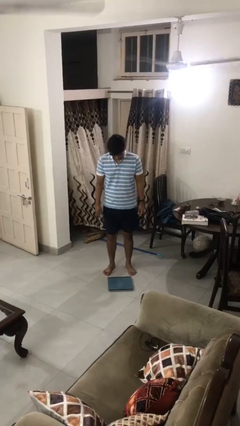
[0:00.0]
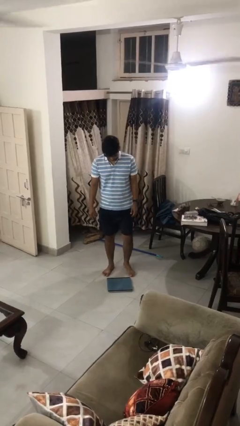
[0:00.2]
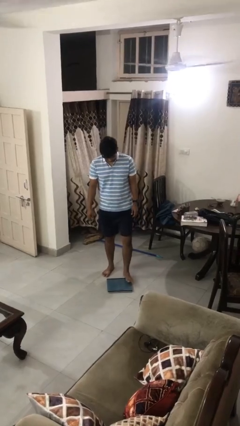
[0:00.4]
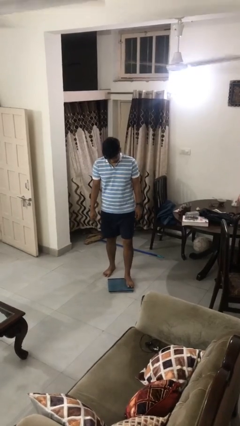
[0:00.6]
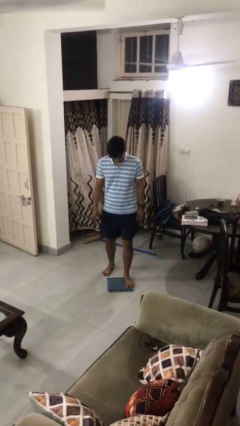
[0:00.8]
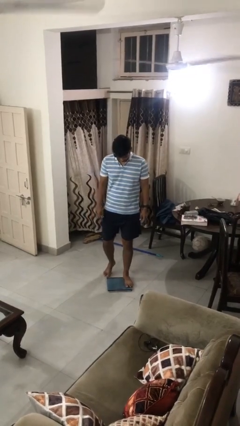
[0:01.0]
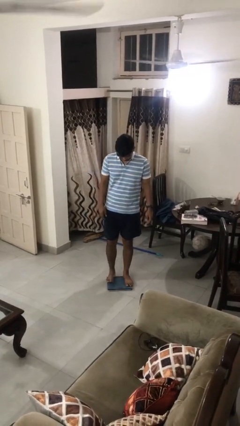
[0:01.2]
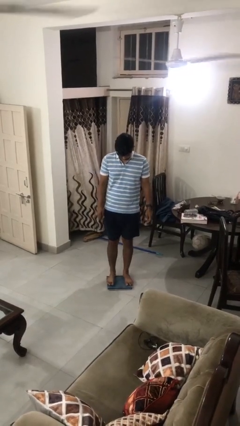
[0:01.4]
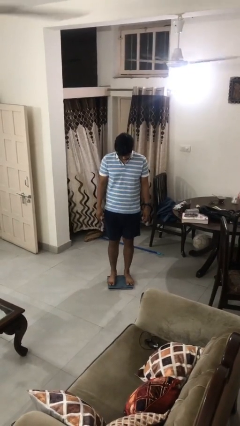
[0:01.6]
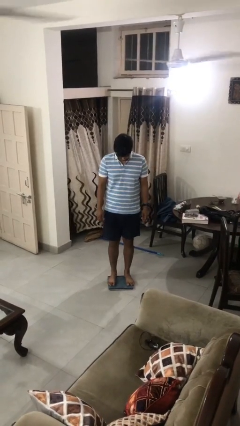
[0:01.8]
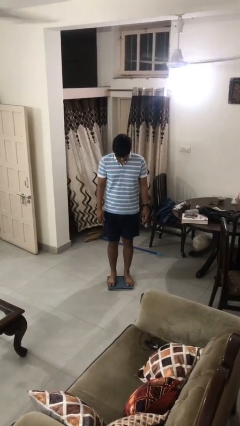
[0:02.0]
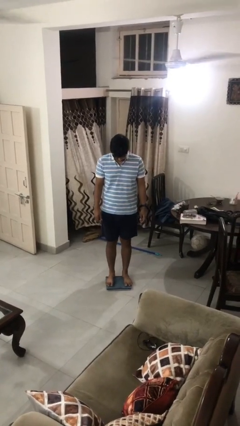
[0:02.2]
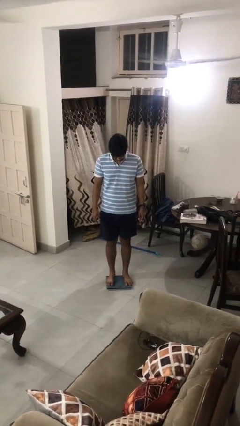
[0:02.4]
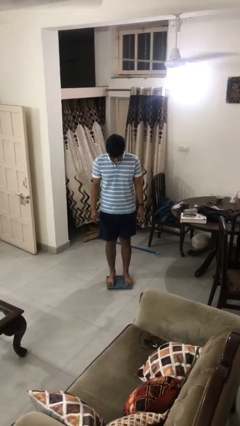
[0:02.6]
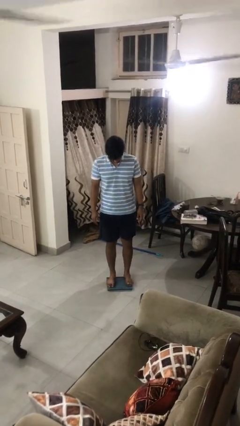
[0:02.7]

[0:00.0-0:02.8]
person uses bodyweight scale

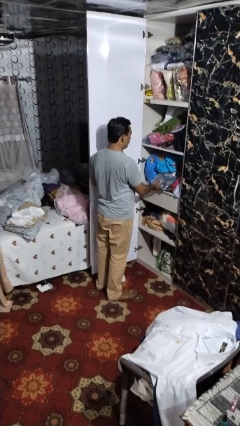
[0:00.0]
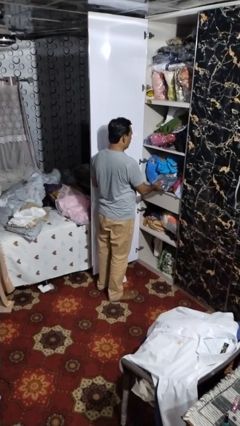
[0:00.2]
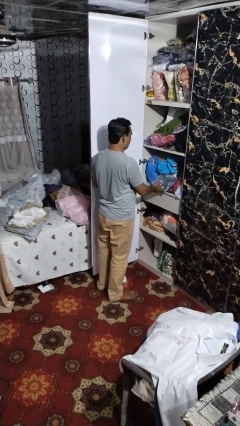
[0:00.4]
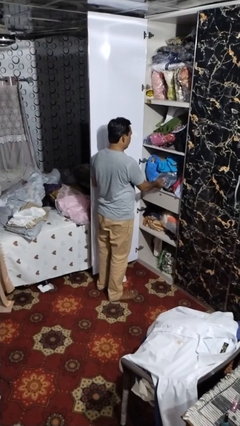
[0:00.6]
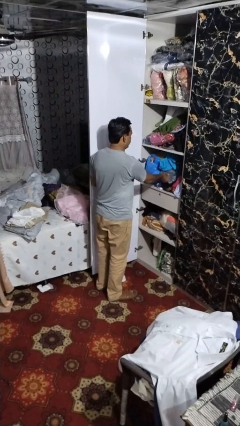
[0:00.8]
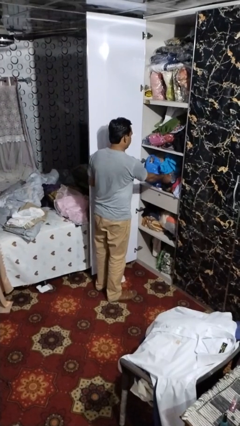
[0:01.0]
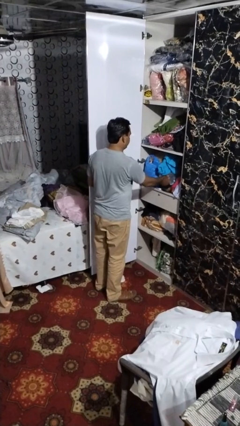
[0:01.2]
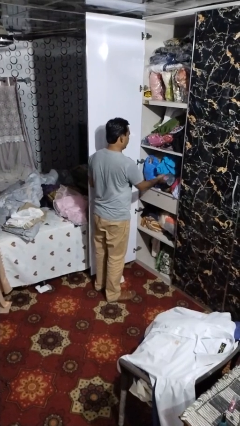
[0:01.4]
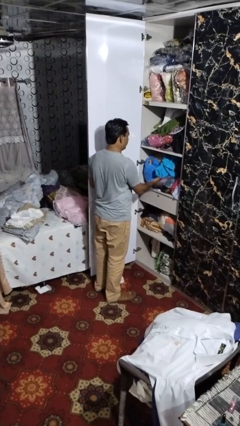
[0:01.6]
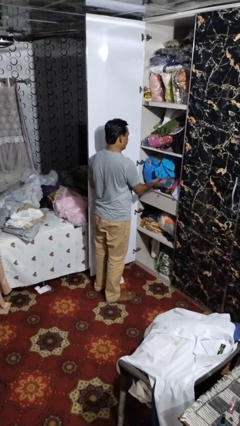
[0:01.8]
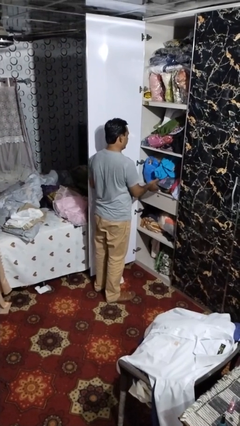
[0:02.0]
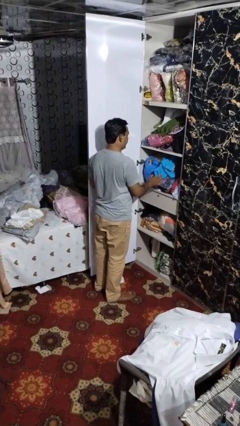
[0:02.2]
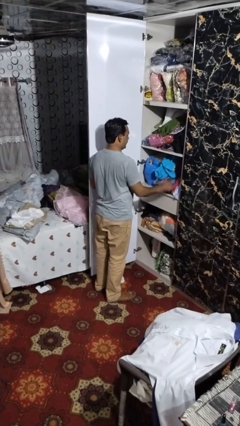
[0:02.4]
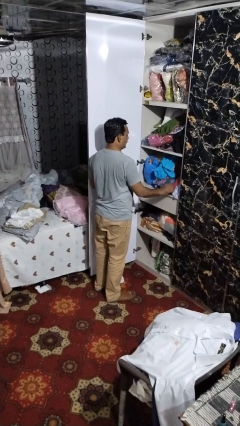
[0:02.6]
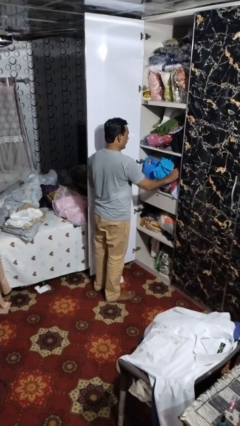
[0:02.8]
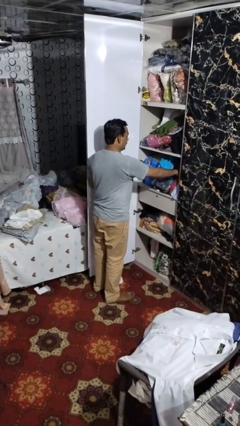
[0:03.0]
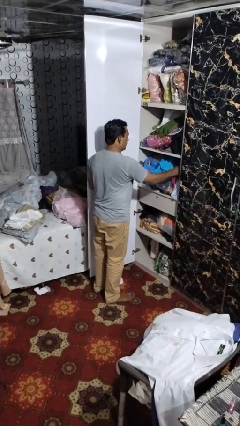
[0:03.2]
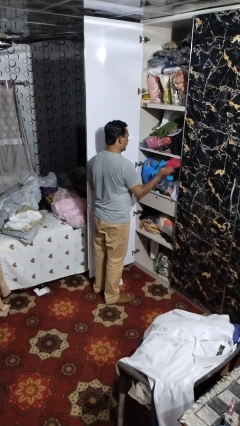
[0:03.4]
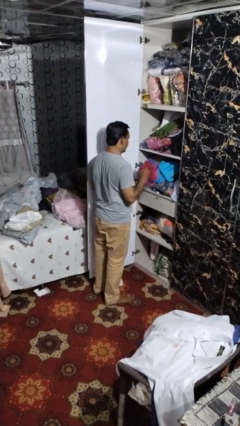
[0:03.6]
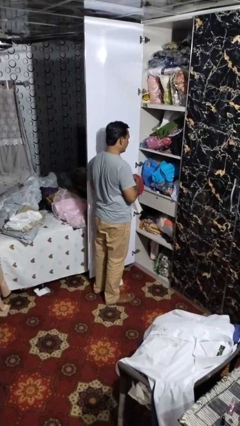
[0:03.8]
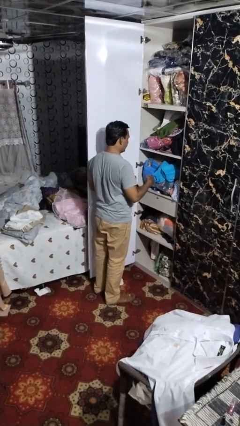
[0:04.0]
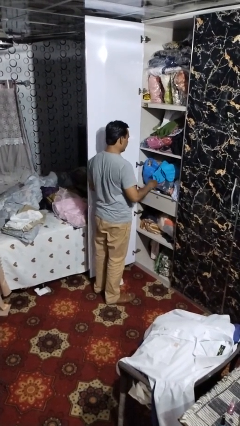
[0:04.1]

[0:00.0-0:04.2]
person takes clothes from dresser

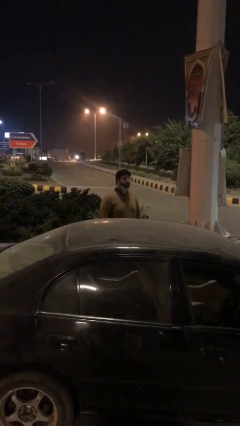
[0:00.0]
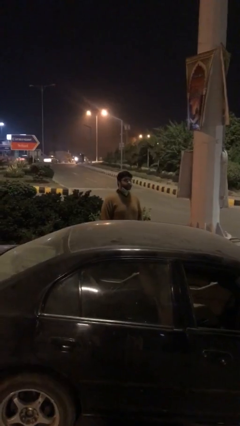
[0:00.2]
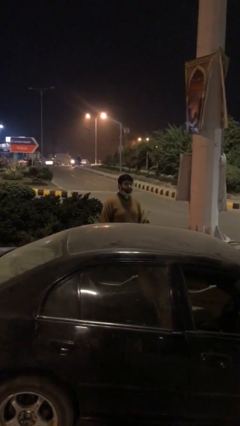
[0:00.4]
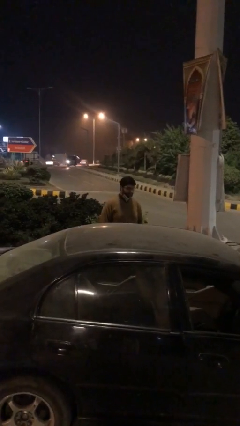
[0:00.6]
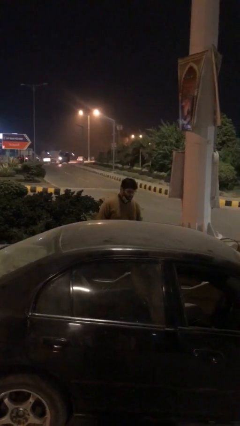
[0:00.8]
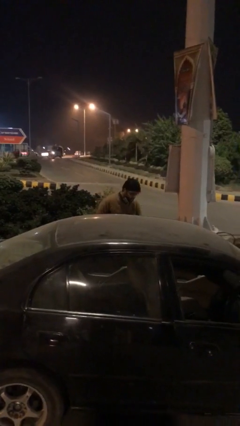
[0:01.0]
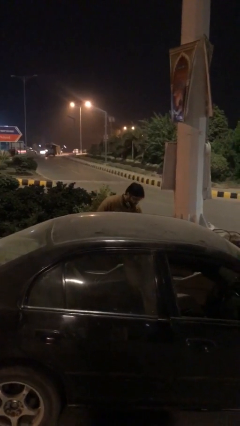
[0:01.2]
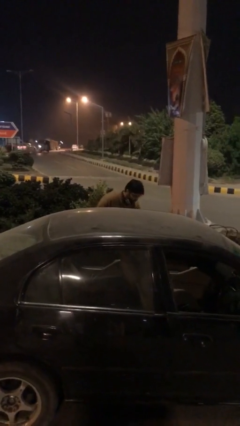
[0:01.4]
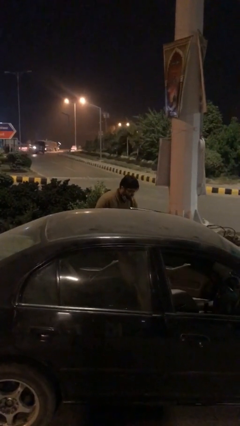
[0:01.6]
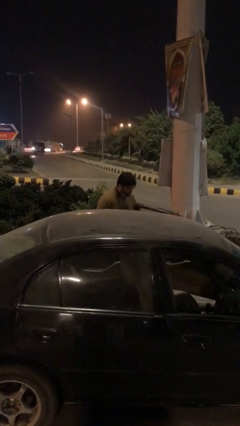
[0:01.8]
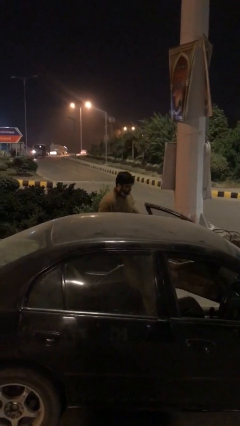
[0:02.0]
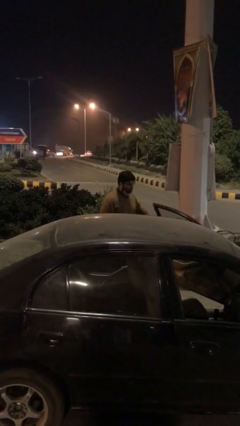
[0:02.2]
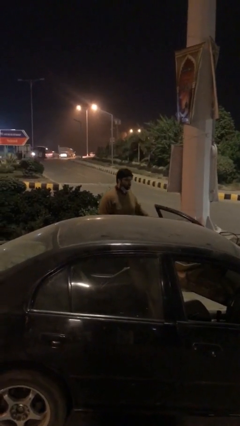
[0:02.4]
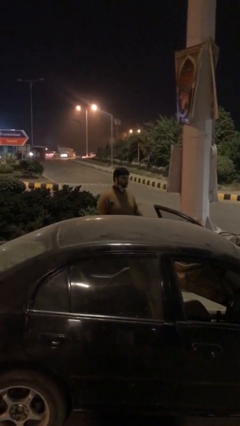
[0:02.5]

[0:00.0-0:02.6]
person opens car door

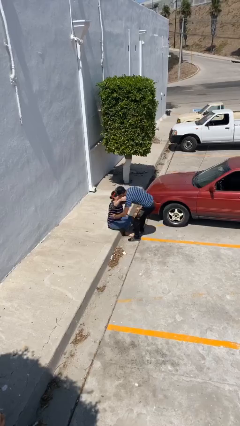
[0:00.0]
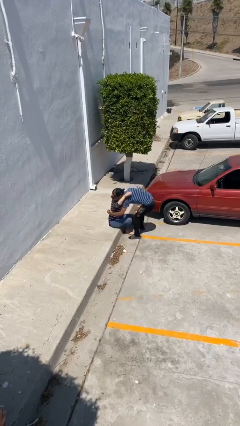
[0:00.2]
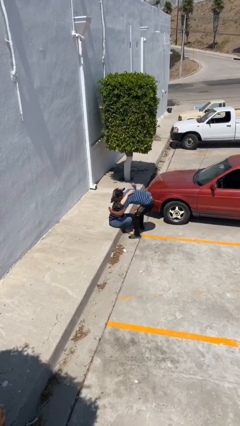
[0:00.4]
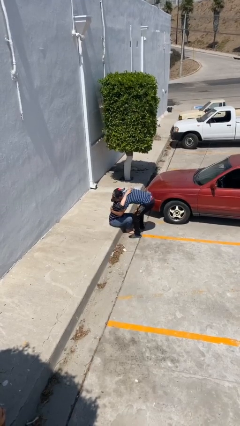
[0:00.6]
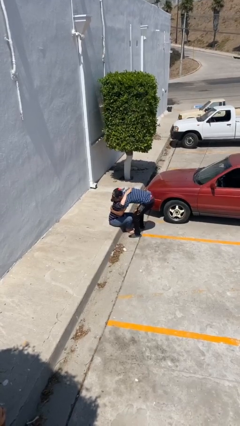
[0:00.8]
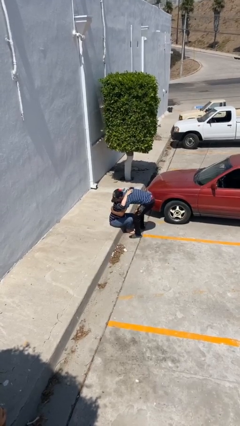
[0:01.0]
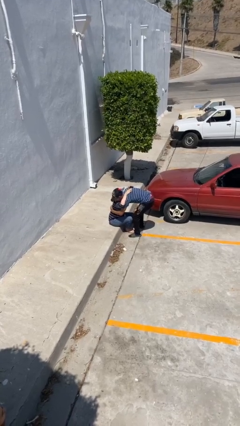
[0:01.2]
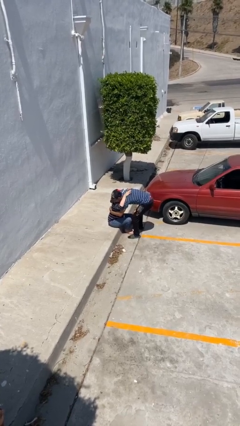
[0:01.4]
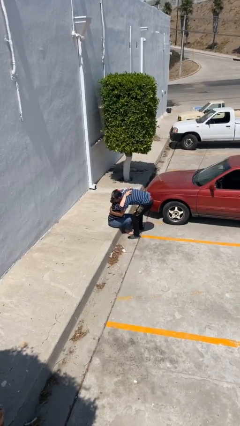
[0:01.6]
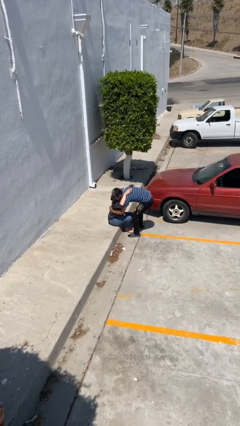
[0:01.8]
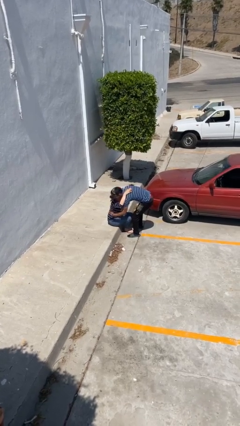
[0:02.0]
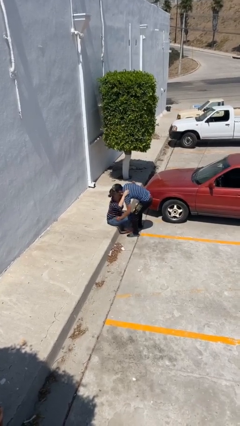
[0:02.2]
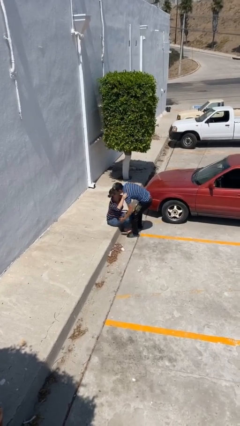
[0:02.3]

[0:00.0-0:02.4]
person embraces person

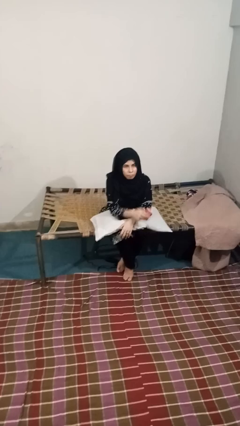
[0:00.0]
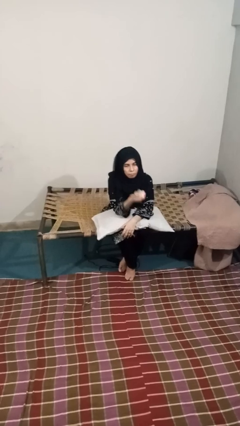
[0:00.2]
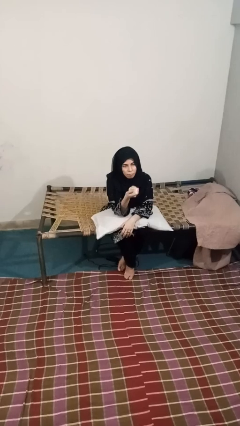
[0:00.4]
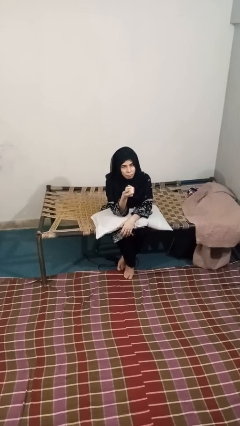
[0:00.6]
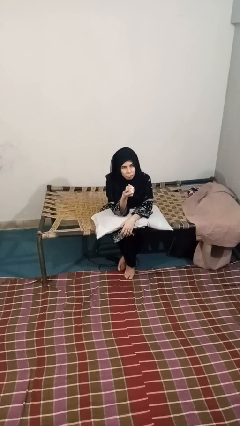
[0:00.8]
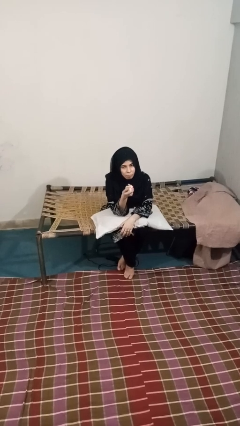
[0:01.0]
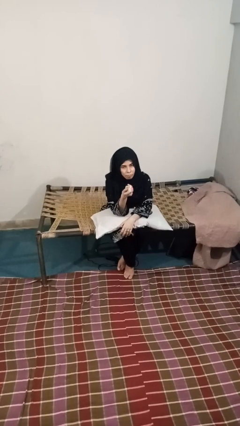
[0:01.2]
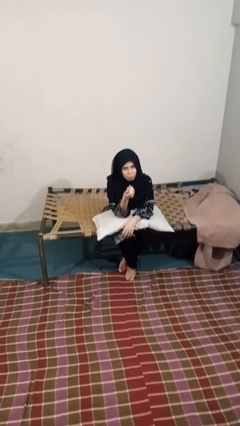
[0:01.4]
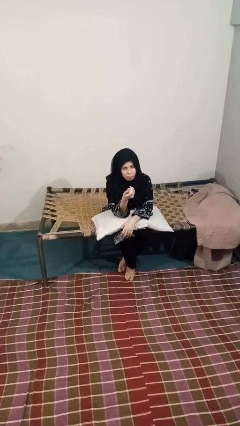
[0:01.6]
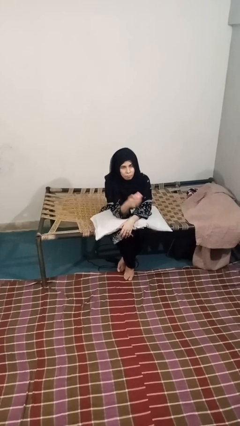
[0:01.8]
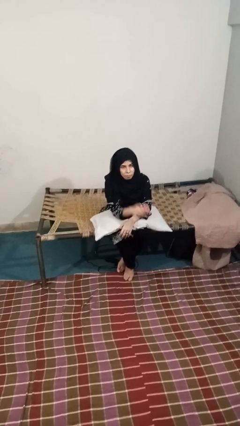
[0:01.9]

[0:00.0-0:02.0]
person uses television remote

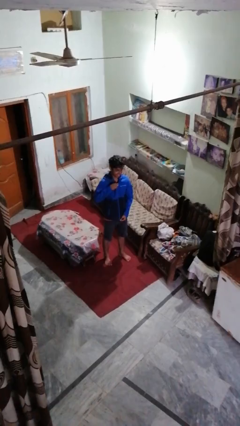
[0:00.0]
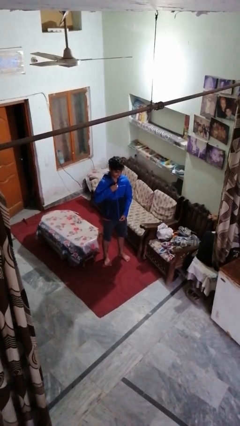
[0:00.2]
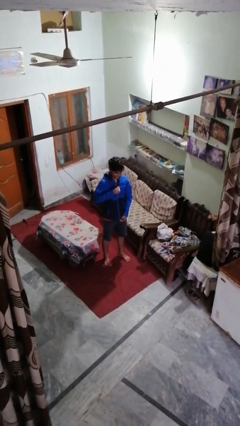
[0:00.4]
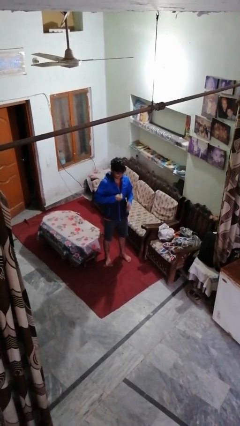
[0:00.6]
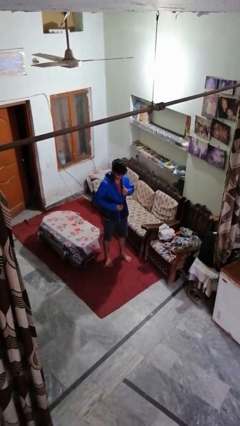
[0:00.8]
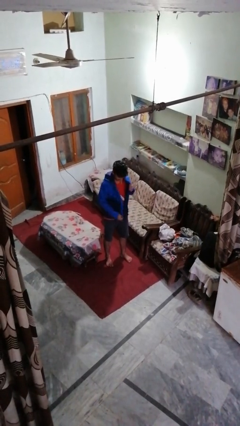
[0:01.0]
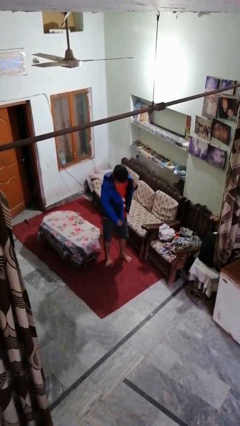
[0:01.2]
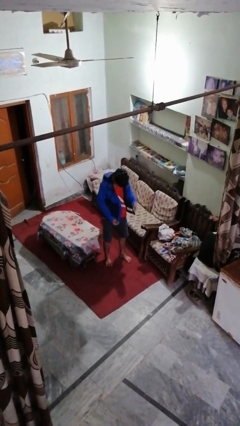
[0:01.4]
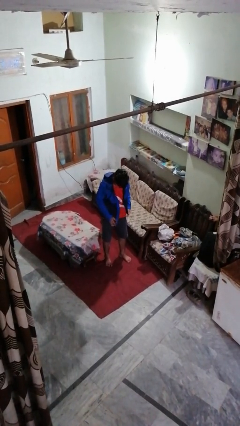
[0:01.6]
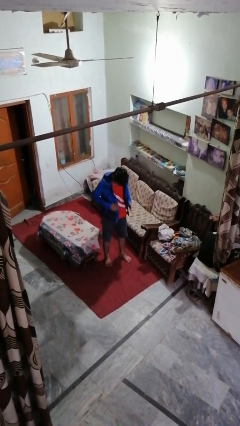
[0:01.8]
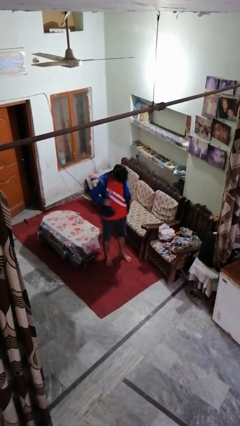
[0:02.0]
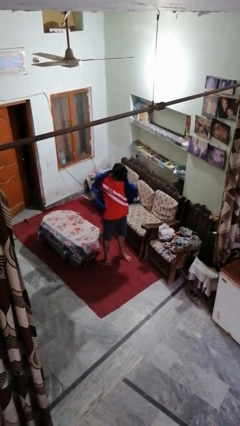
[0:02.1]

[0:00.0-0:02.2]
person unzips jacket

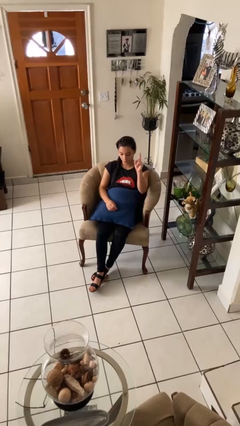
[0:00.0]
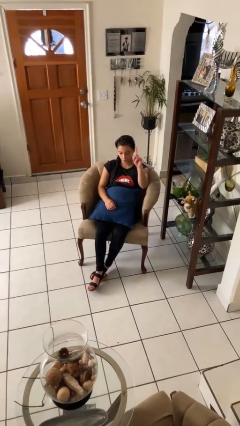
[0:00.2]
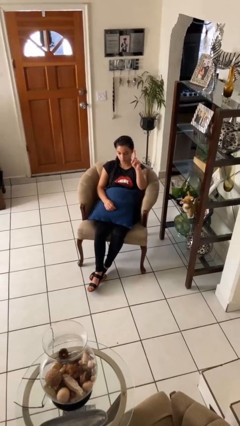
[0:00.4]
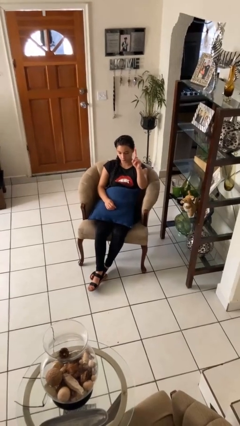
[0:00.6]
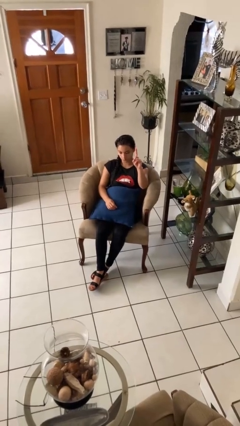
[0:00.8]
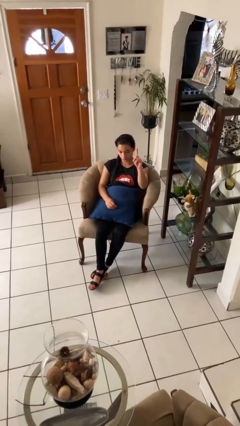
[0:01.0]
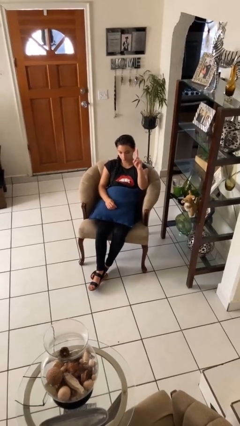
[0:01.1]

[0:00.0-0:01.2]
person gestures number one
